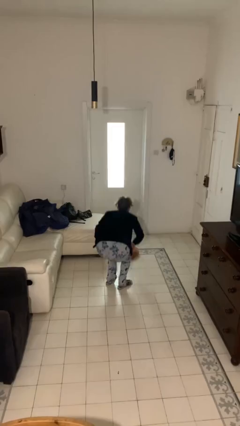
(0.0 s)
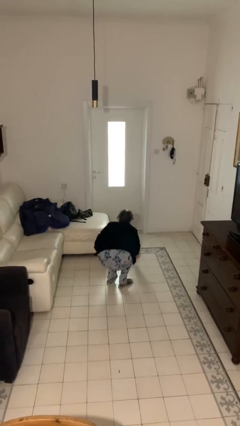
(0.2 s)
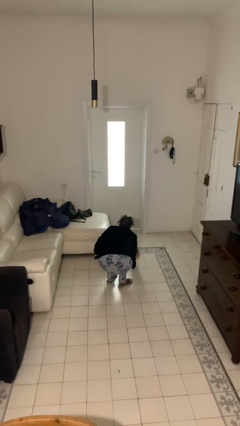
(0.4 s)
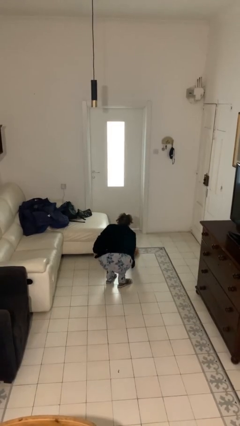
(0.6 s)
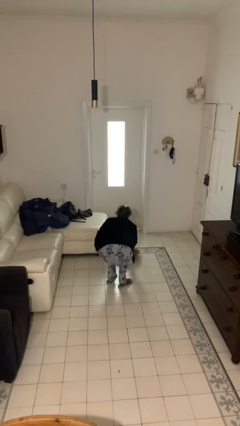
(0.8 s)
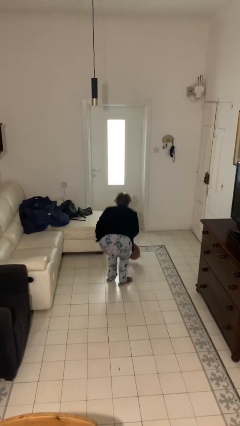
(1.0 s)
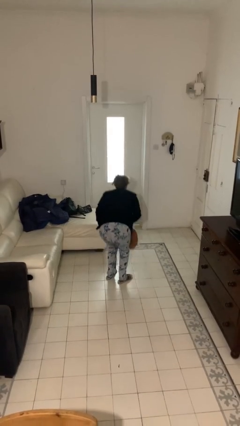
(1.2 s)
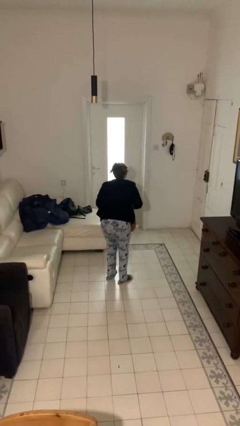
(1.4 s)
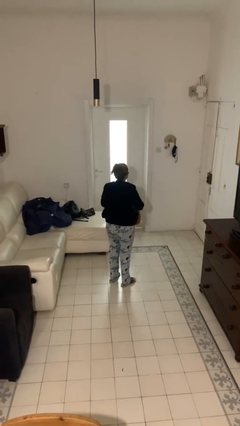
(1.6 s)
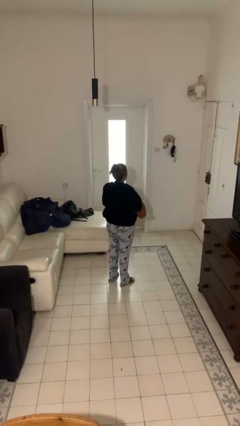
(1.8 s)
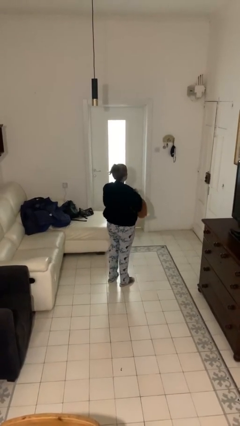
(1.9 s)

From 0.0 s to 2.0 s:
person picks up object from floor

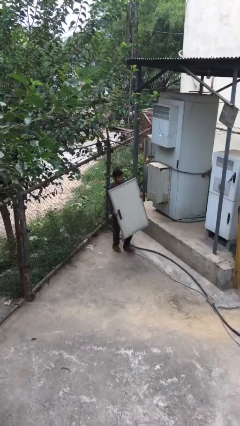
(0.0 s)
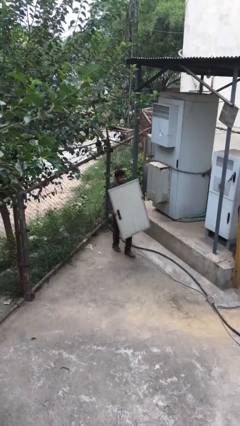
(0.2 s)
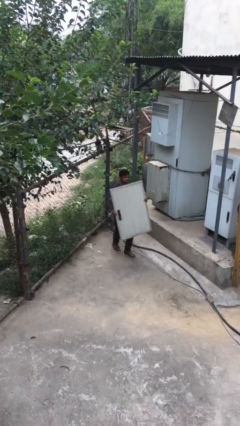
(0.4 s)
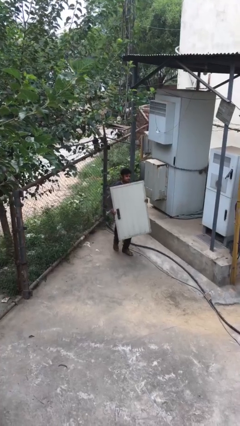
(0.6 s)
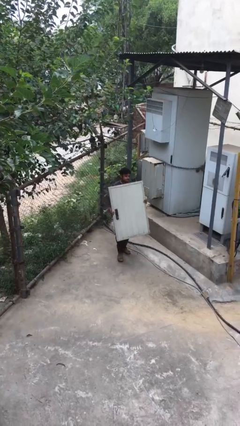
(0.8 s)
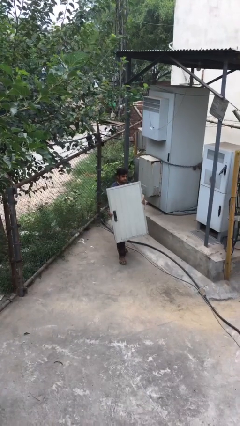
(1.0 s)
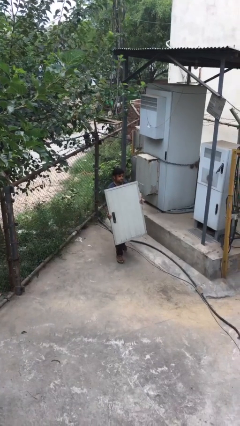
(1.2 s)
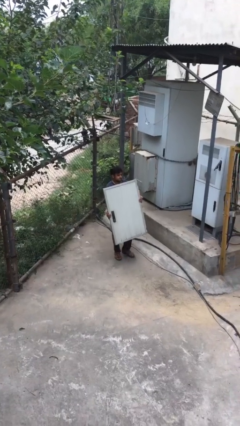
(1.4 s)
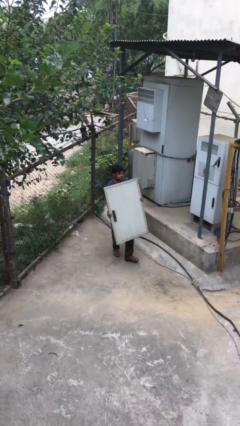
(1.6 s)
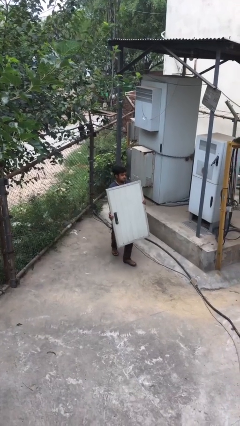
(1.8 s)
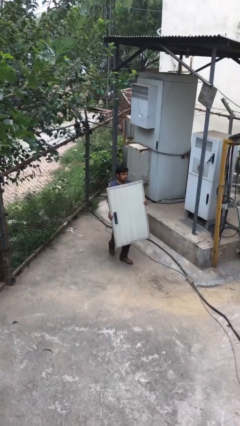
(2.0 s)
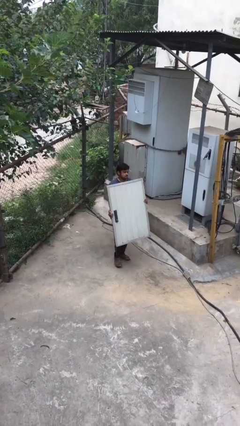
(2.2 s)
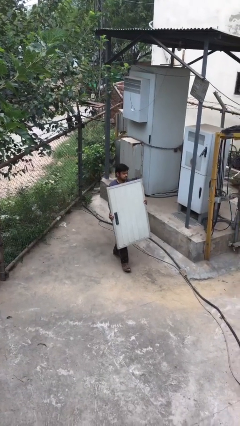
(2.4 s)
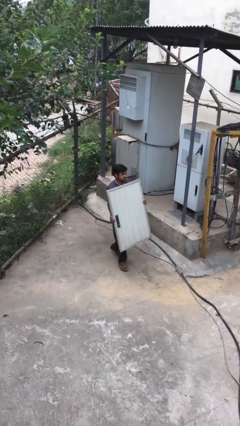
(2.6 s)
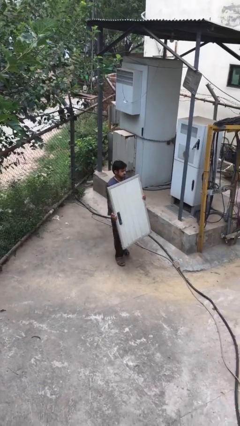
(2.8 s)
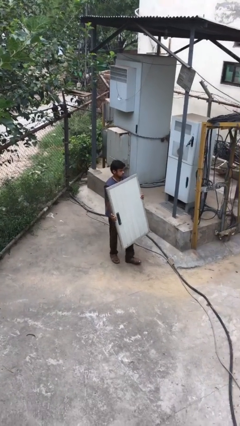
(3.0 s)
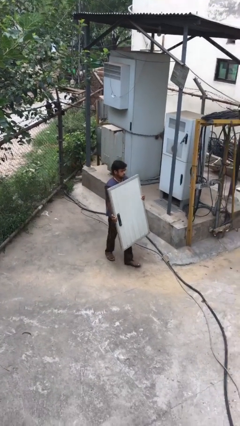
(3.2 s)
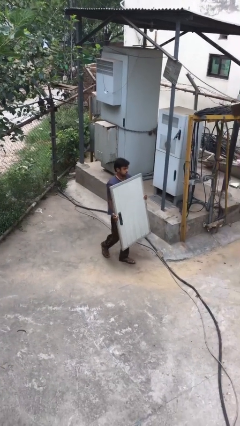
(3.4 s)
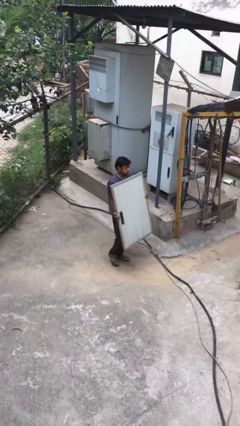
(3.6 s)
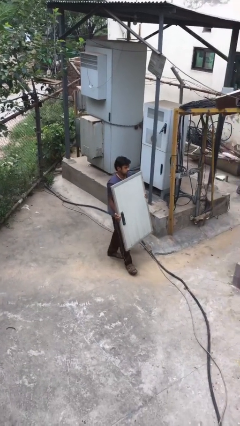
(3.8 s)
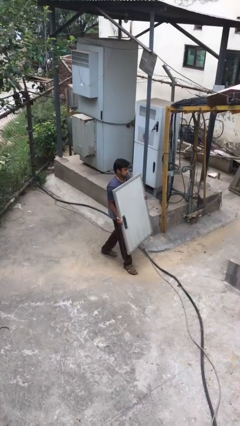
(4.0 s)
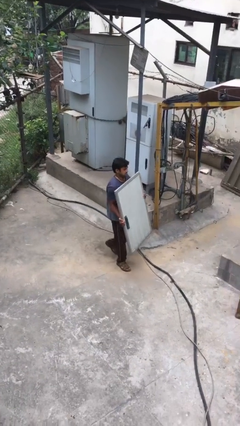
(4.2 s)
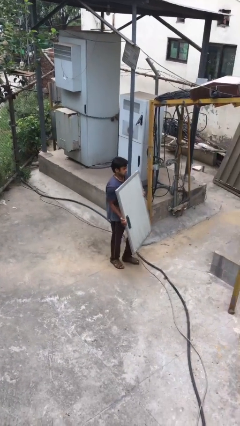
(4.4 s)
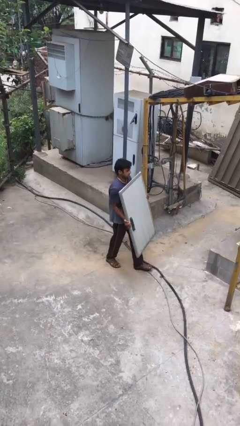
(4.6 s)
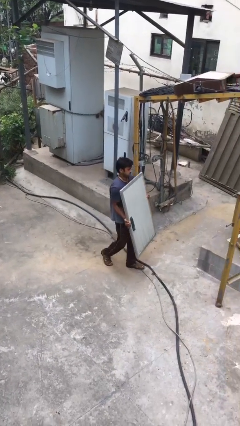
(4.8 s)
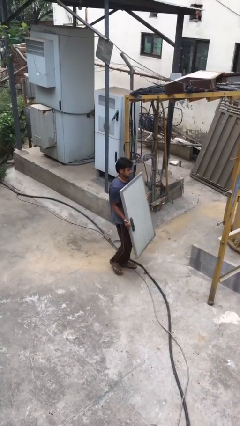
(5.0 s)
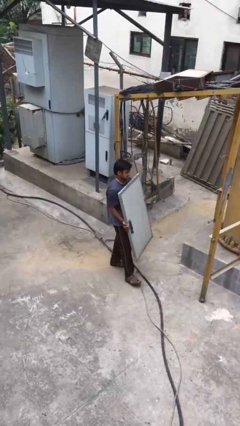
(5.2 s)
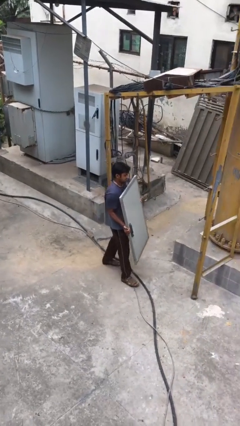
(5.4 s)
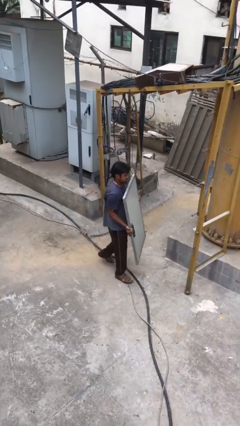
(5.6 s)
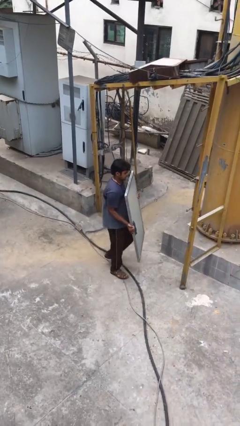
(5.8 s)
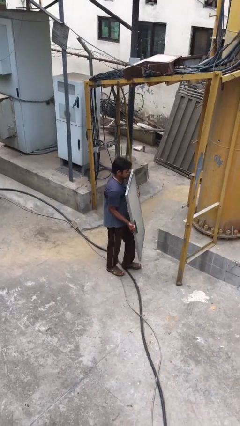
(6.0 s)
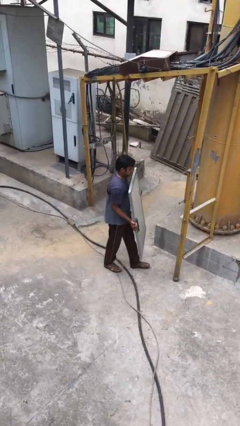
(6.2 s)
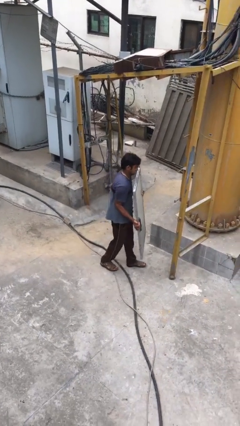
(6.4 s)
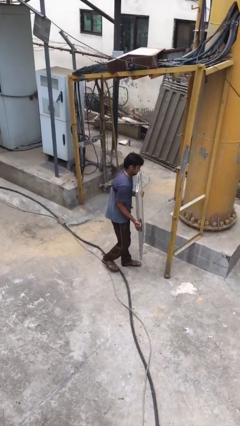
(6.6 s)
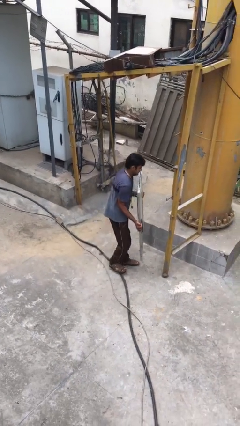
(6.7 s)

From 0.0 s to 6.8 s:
person carries heavy object

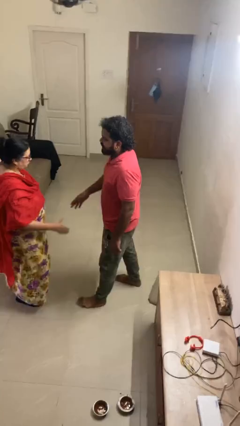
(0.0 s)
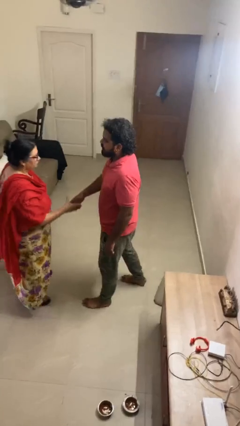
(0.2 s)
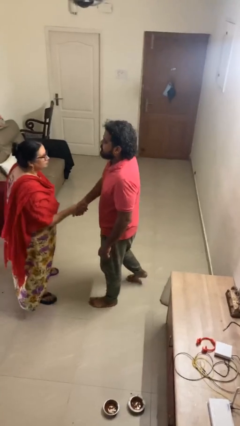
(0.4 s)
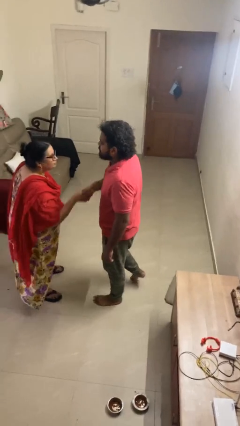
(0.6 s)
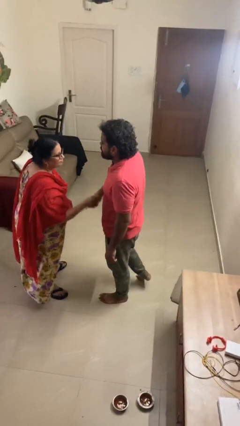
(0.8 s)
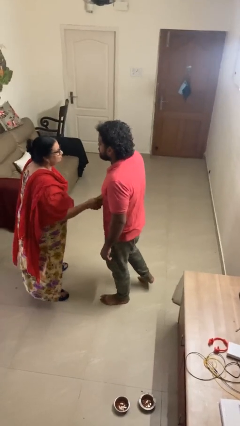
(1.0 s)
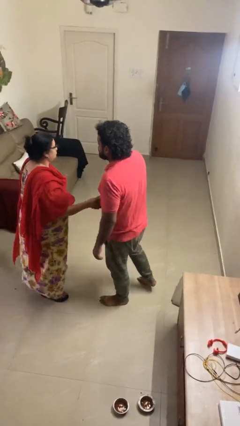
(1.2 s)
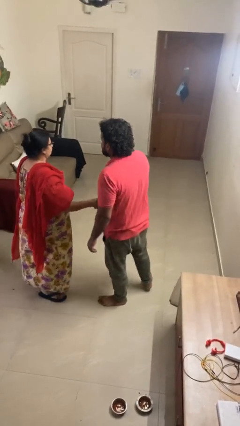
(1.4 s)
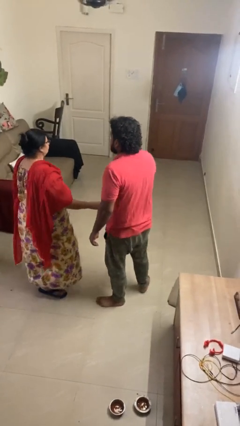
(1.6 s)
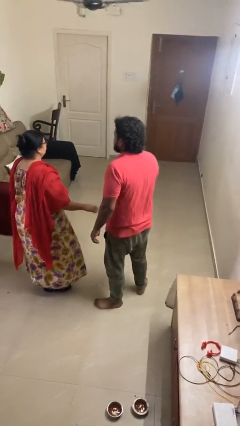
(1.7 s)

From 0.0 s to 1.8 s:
person shakes hand

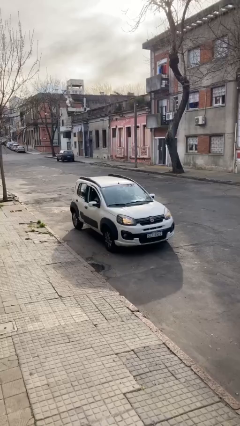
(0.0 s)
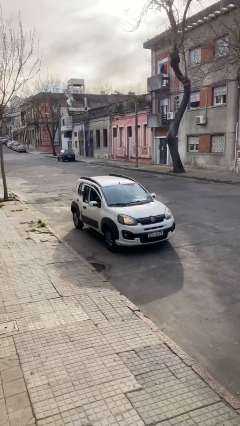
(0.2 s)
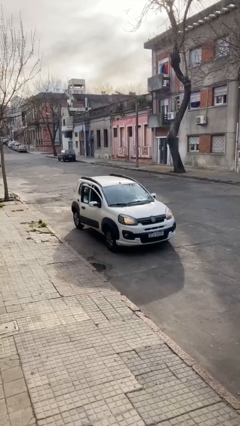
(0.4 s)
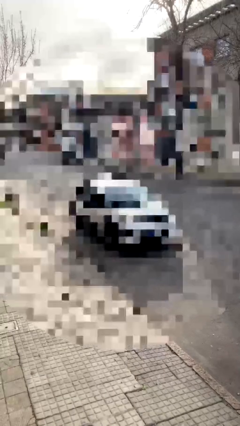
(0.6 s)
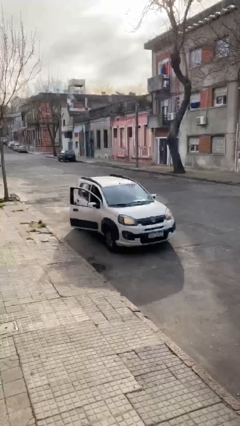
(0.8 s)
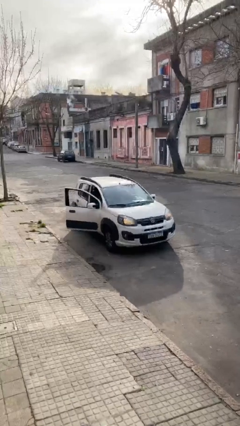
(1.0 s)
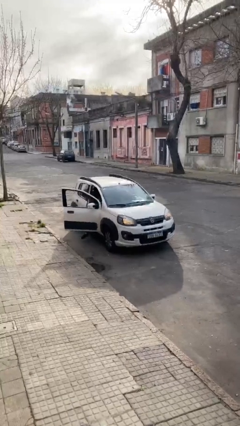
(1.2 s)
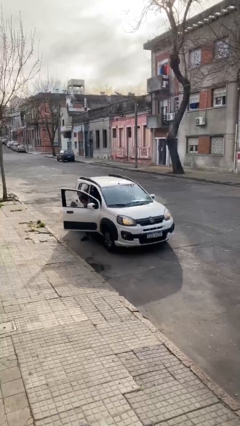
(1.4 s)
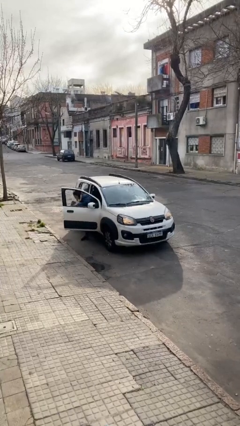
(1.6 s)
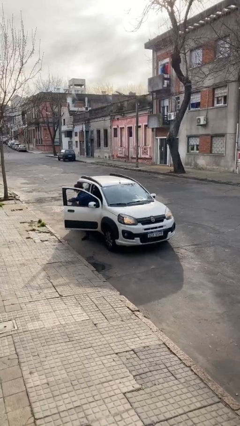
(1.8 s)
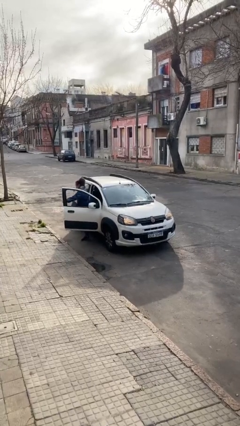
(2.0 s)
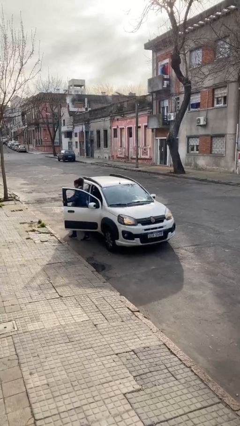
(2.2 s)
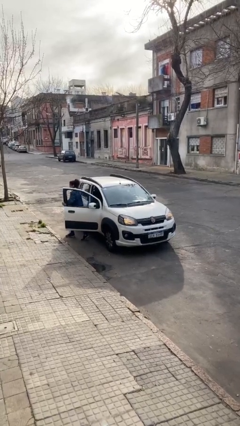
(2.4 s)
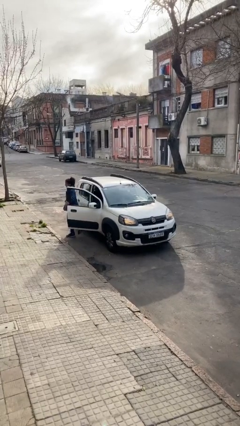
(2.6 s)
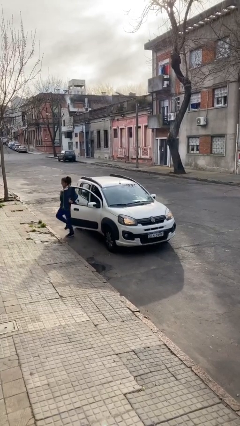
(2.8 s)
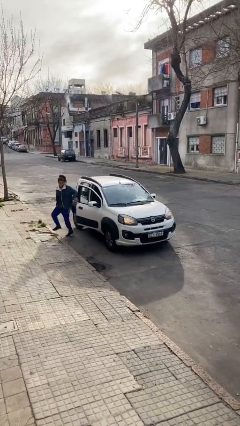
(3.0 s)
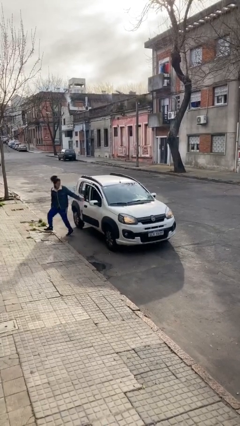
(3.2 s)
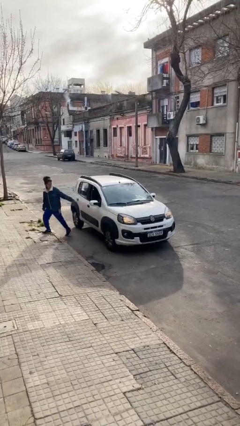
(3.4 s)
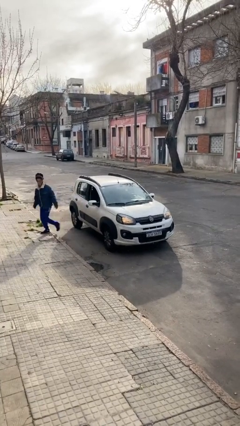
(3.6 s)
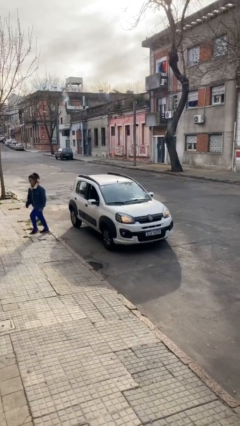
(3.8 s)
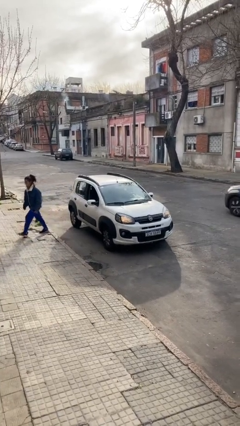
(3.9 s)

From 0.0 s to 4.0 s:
car drops off person

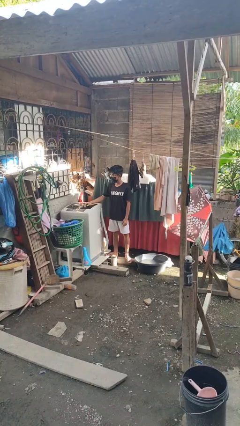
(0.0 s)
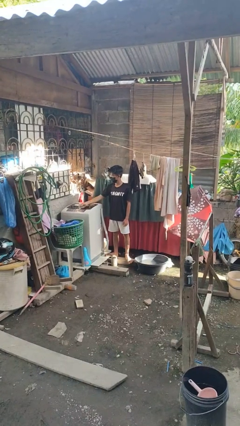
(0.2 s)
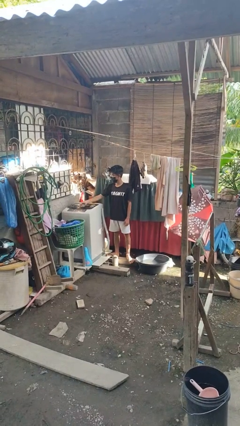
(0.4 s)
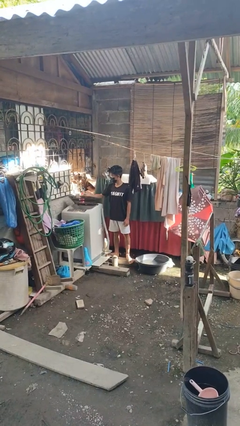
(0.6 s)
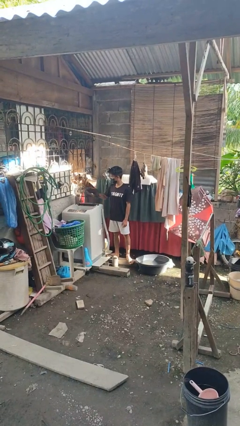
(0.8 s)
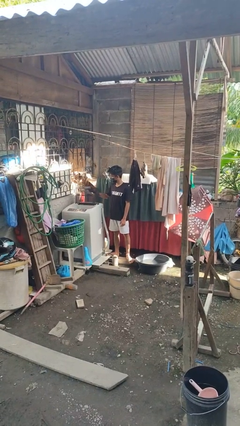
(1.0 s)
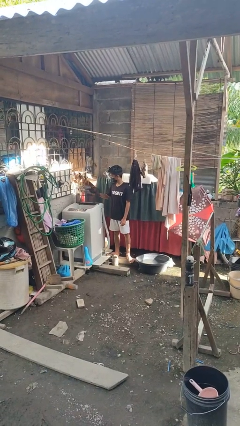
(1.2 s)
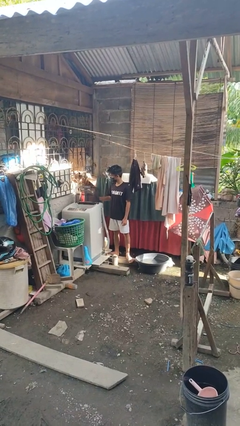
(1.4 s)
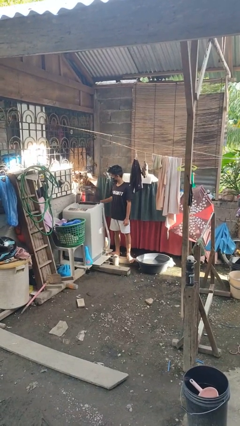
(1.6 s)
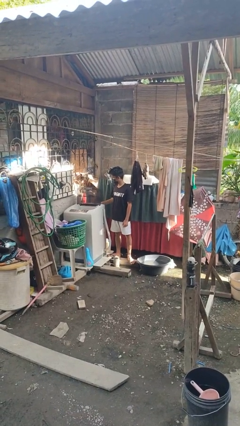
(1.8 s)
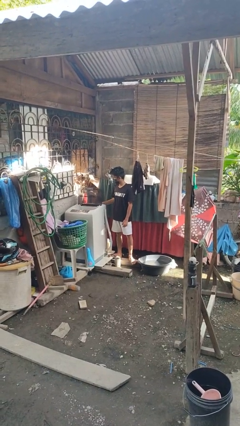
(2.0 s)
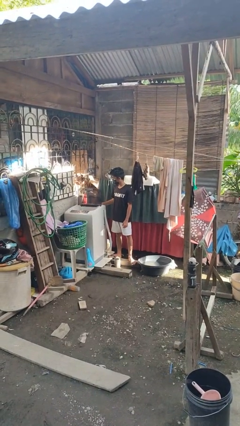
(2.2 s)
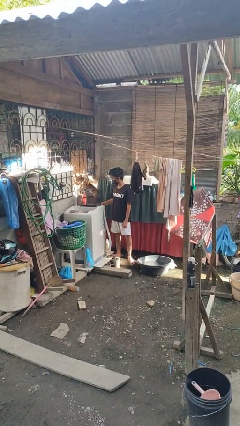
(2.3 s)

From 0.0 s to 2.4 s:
person opens clothes washer

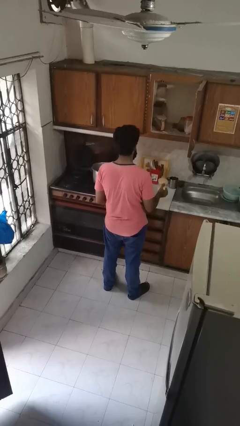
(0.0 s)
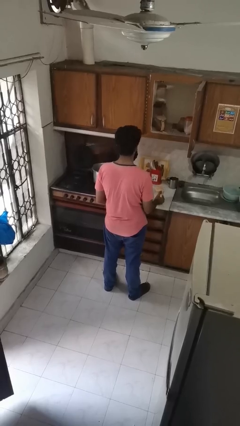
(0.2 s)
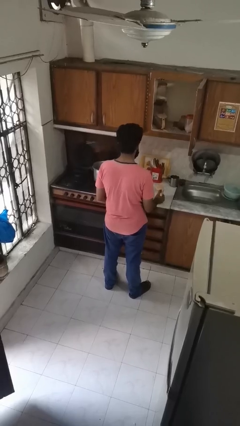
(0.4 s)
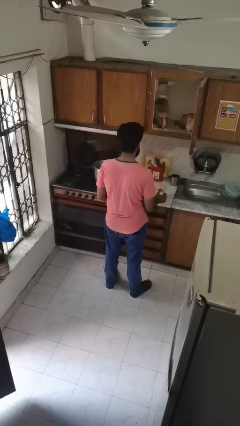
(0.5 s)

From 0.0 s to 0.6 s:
person puts down object into cabinet
